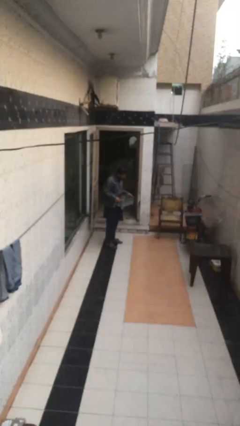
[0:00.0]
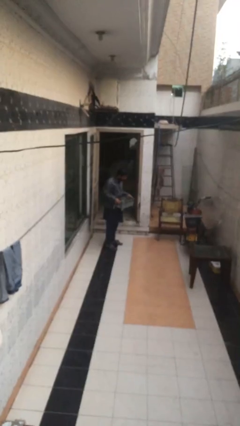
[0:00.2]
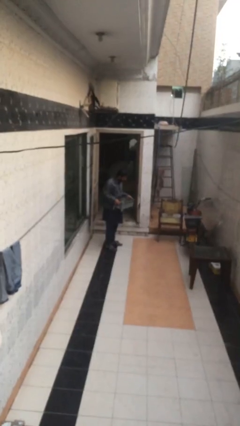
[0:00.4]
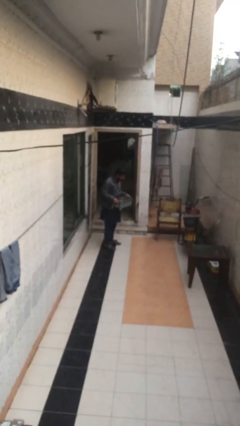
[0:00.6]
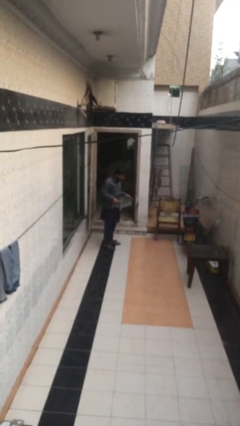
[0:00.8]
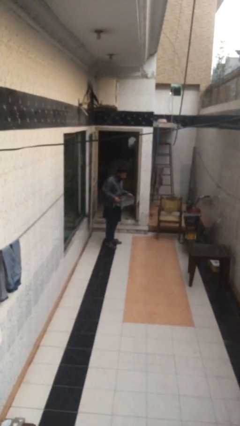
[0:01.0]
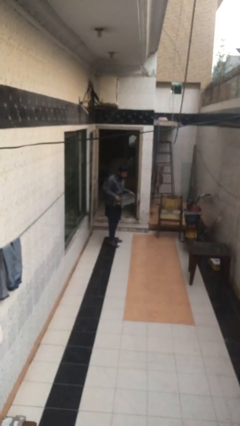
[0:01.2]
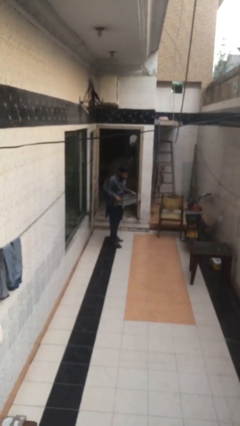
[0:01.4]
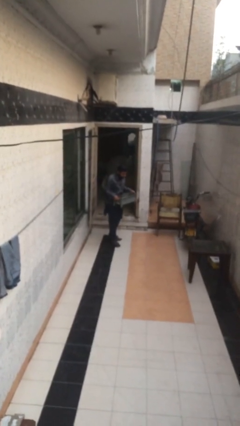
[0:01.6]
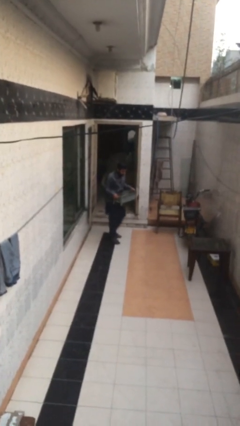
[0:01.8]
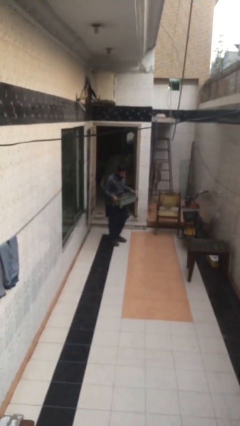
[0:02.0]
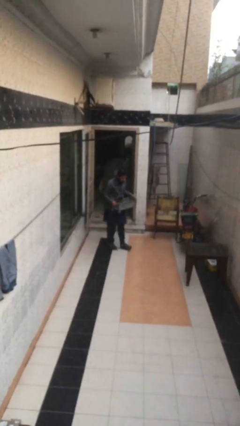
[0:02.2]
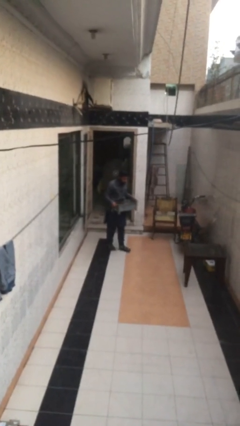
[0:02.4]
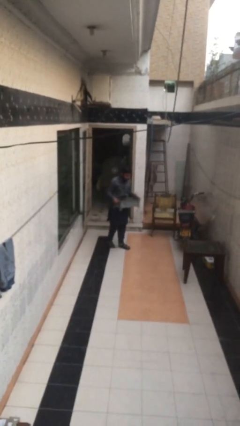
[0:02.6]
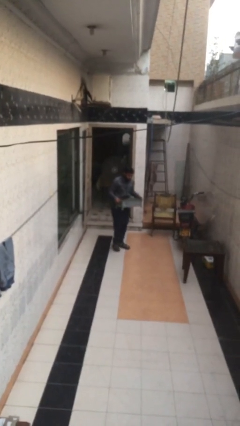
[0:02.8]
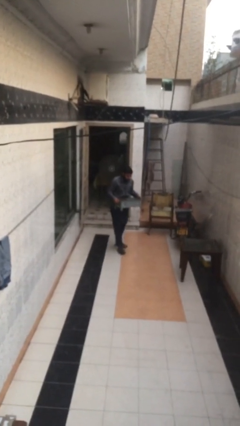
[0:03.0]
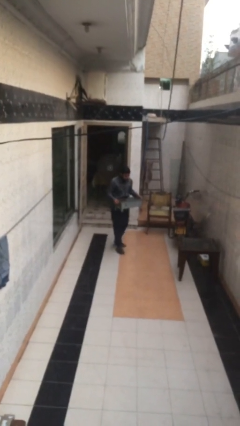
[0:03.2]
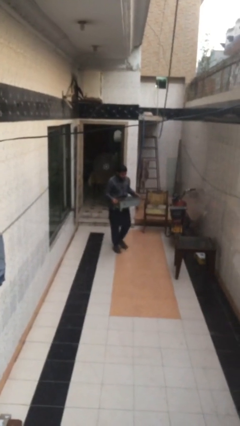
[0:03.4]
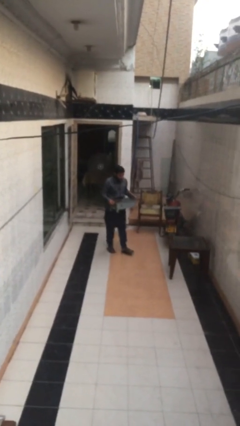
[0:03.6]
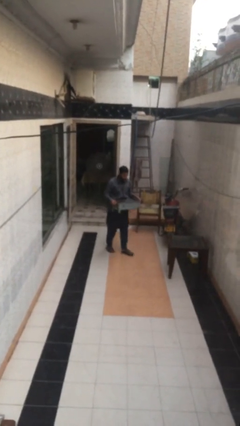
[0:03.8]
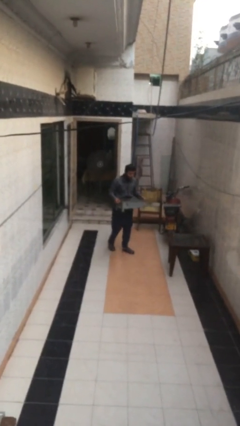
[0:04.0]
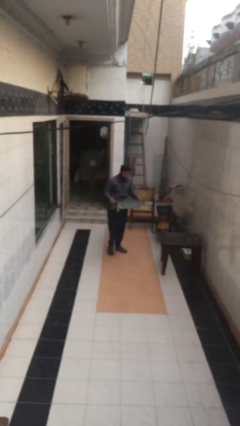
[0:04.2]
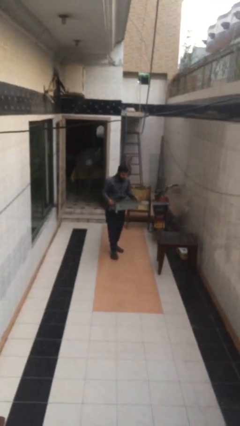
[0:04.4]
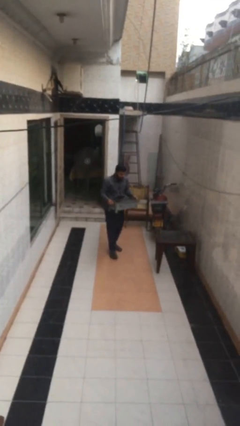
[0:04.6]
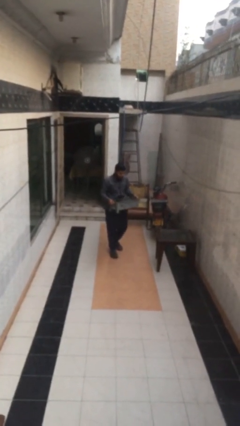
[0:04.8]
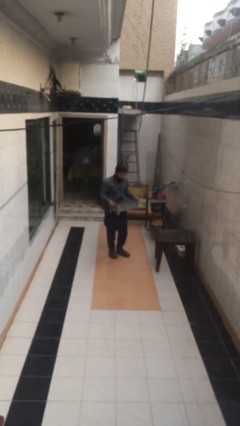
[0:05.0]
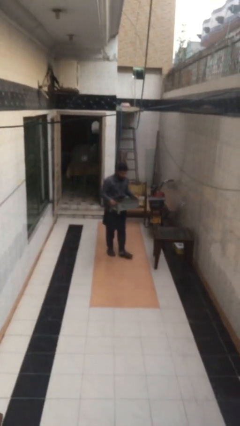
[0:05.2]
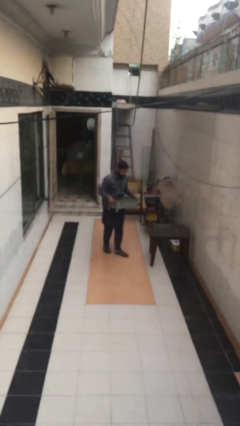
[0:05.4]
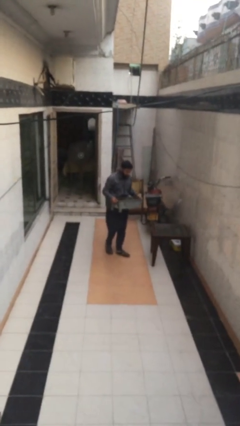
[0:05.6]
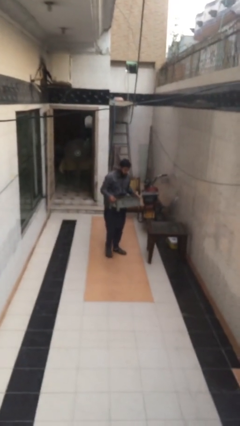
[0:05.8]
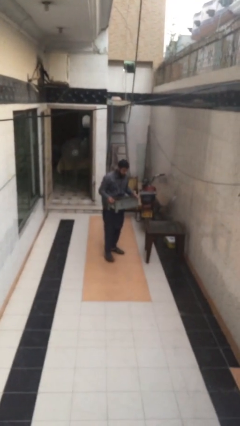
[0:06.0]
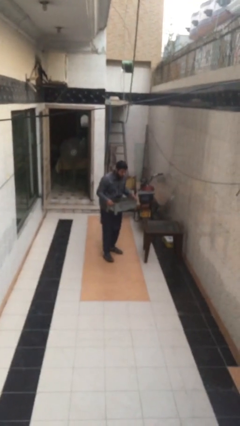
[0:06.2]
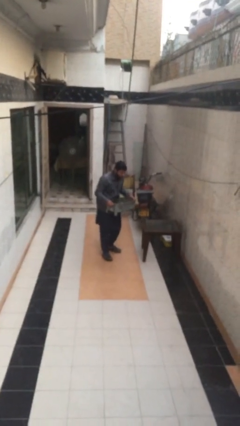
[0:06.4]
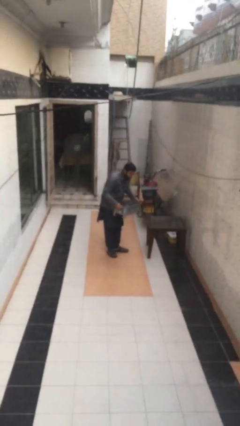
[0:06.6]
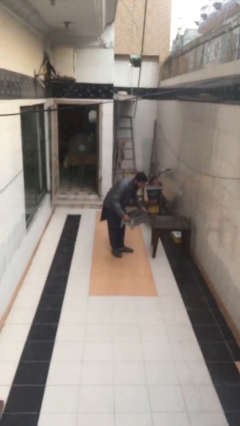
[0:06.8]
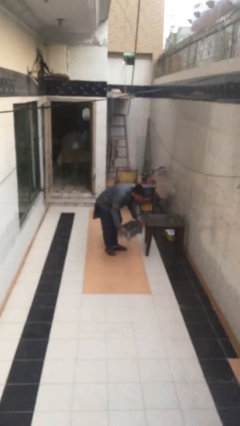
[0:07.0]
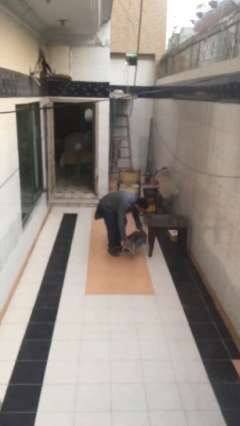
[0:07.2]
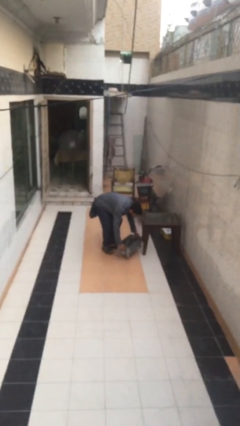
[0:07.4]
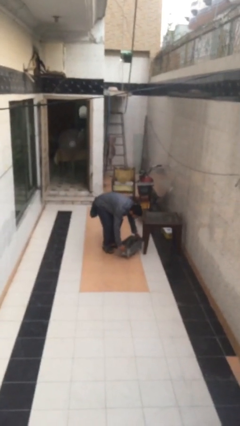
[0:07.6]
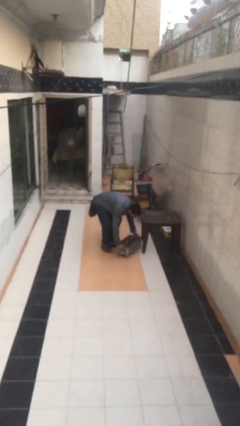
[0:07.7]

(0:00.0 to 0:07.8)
person carries heavy object

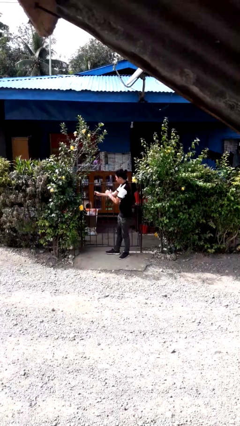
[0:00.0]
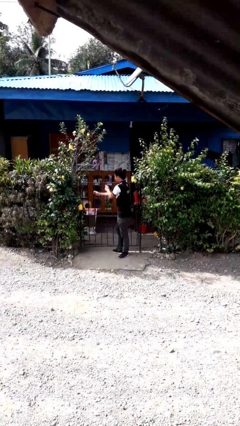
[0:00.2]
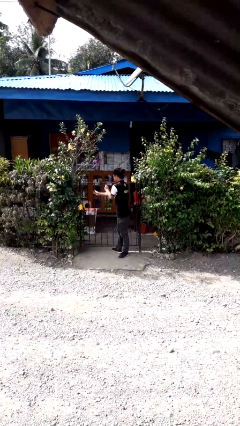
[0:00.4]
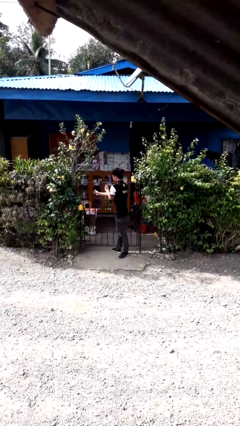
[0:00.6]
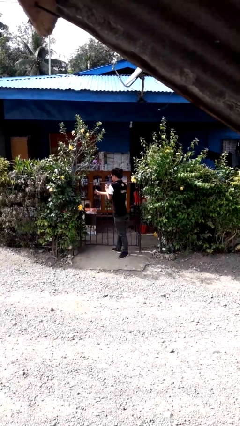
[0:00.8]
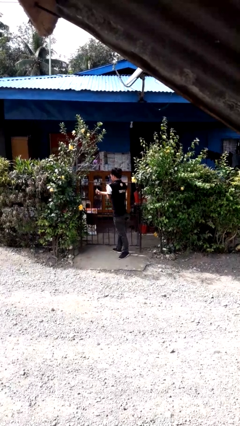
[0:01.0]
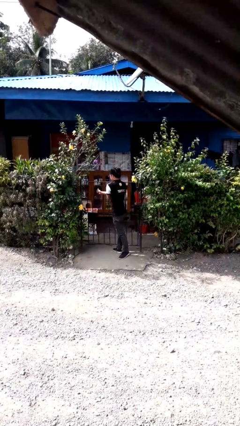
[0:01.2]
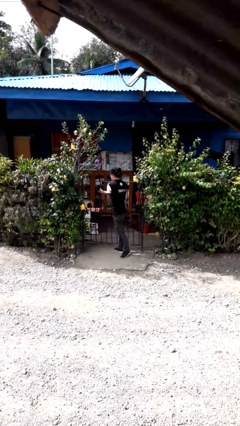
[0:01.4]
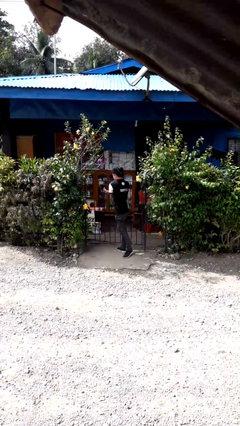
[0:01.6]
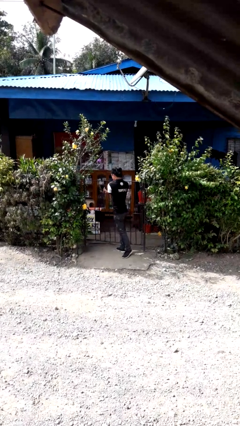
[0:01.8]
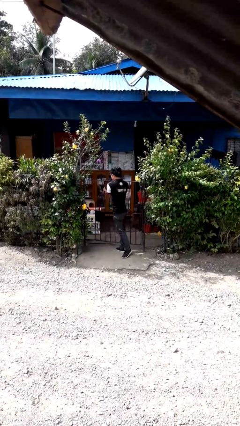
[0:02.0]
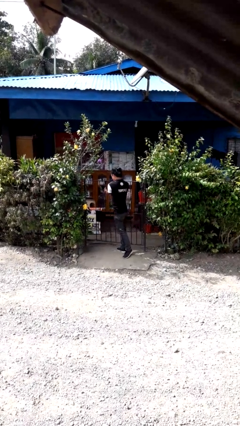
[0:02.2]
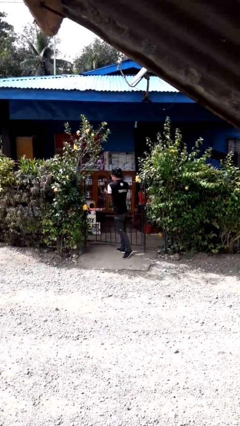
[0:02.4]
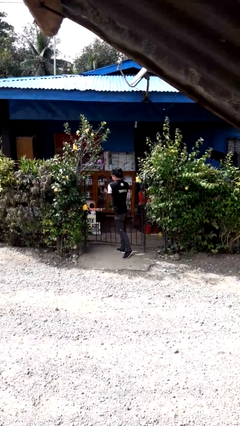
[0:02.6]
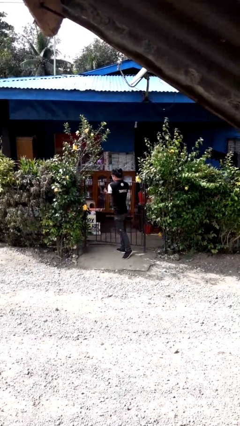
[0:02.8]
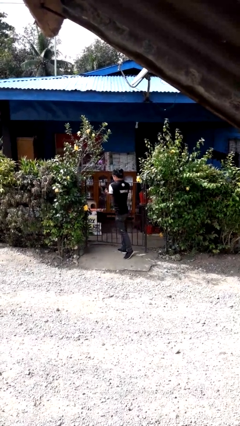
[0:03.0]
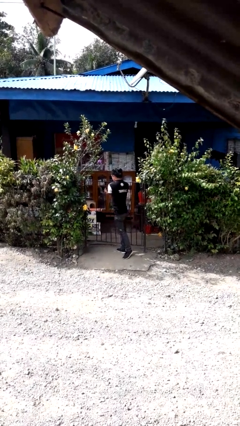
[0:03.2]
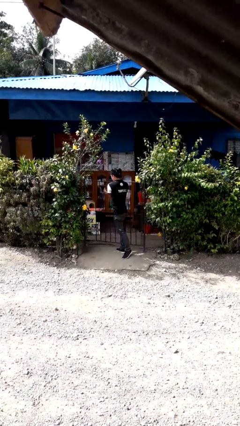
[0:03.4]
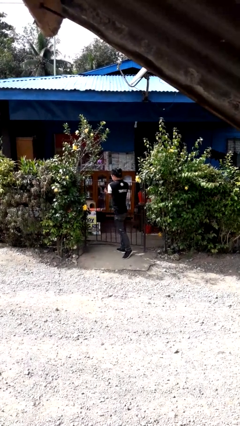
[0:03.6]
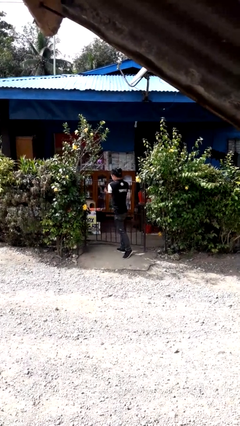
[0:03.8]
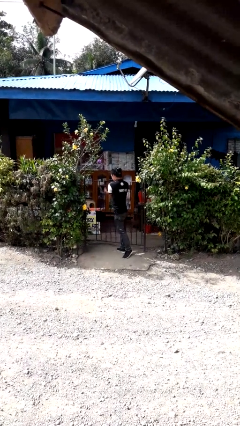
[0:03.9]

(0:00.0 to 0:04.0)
person opens gate

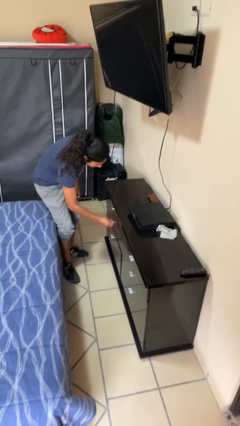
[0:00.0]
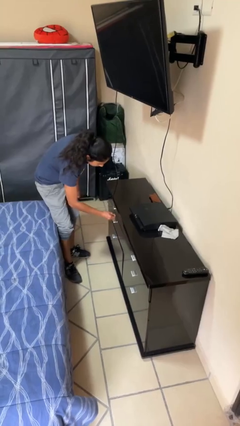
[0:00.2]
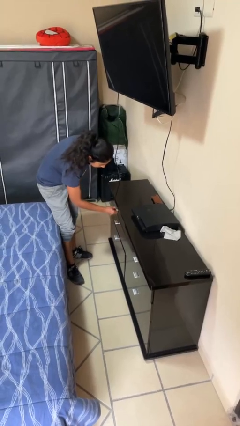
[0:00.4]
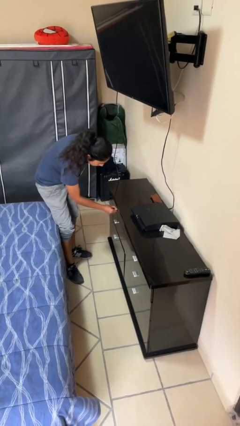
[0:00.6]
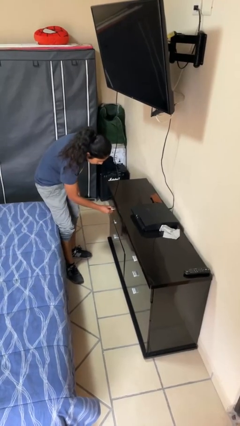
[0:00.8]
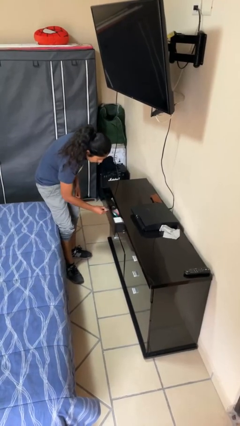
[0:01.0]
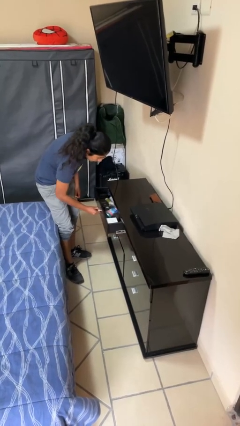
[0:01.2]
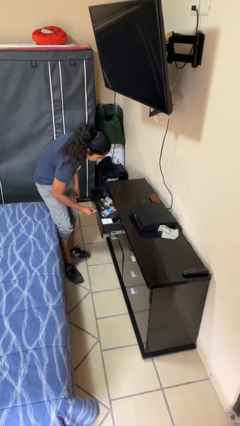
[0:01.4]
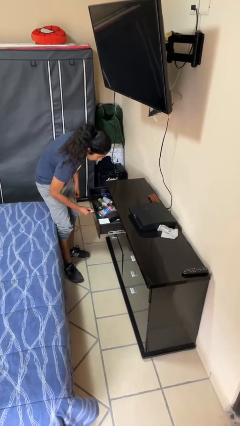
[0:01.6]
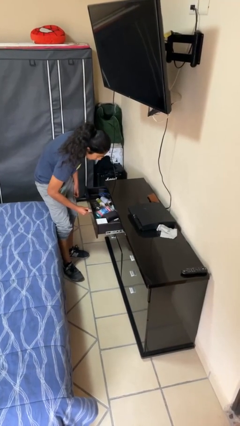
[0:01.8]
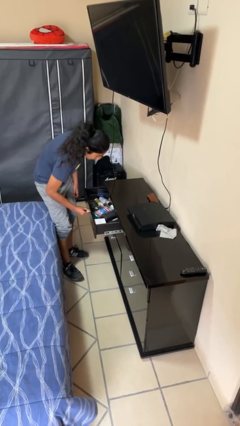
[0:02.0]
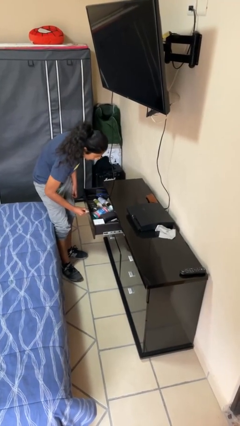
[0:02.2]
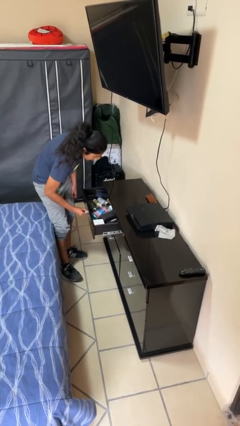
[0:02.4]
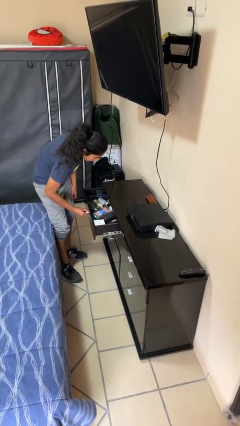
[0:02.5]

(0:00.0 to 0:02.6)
person opens dresser drawer

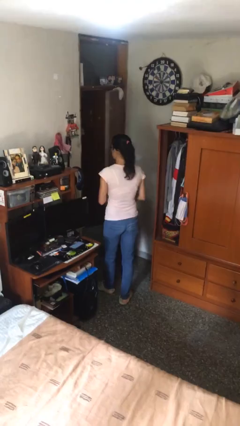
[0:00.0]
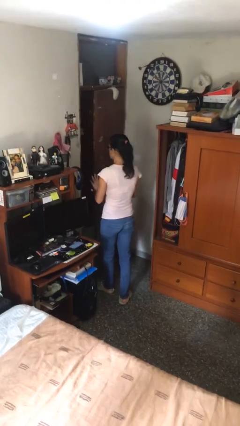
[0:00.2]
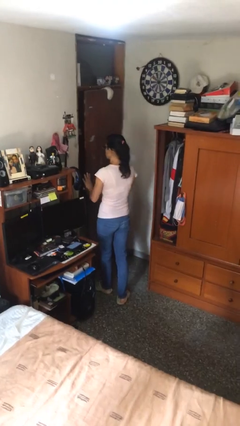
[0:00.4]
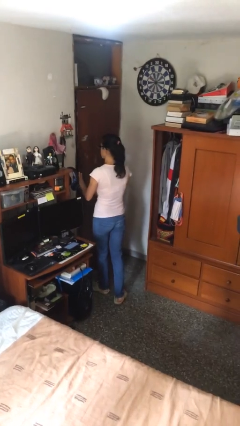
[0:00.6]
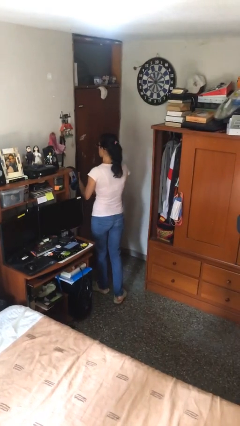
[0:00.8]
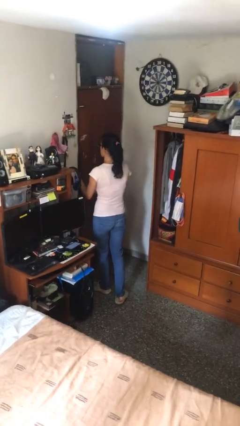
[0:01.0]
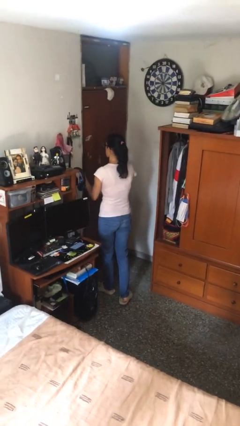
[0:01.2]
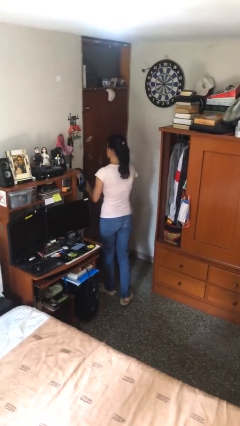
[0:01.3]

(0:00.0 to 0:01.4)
person closes facility door

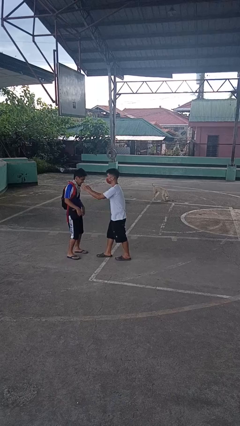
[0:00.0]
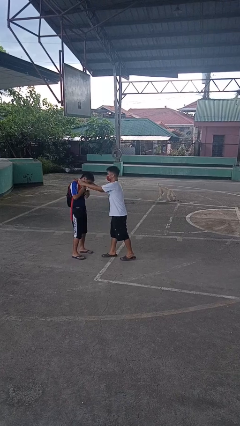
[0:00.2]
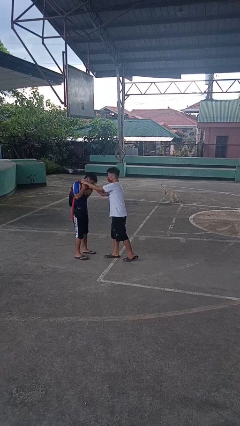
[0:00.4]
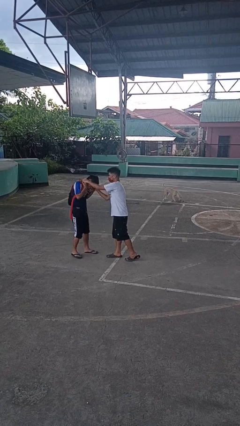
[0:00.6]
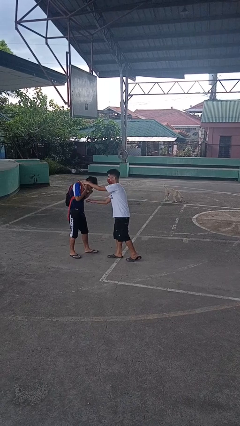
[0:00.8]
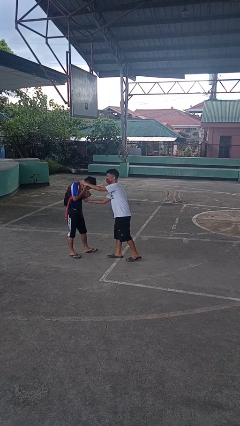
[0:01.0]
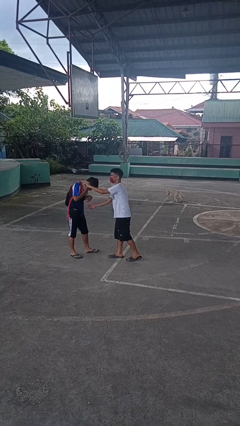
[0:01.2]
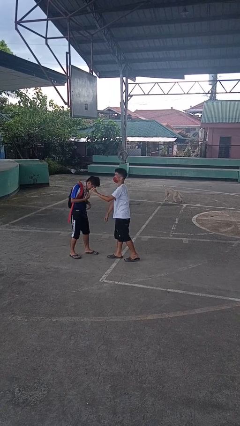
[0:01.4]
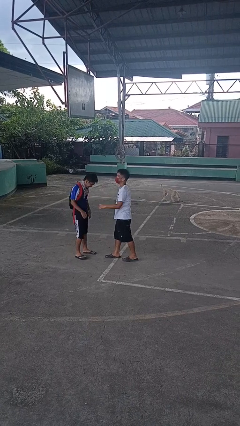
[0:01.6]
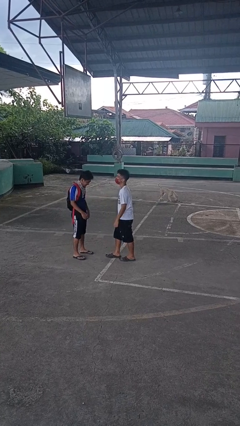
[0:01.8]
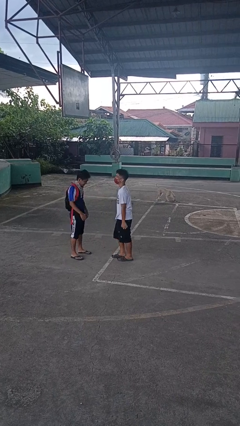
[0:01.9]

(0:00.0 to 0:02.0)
person tickles person
